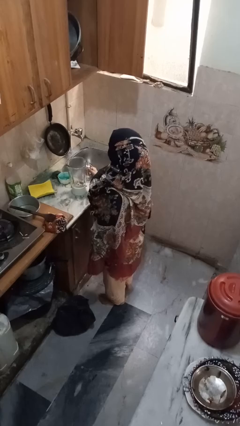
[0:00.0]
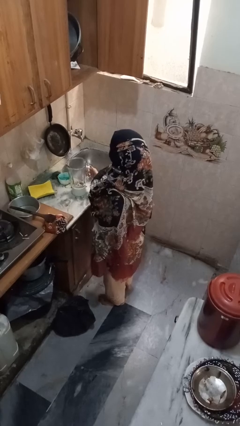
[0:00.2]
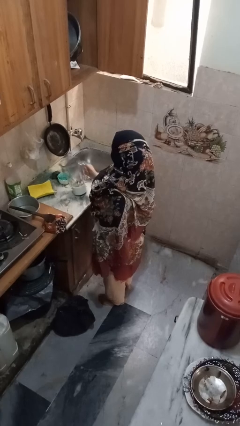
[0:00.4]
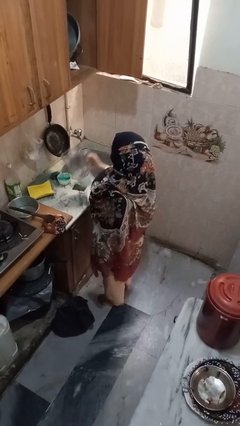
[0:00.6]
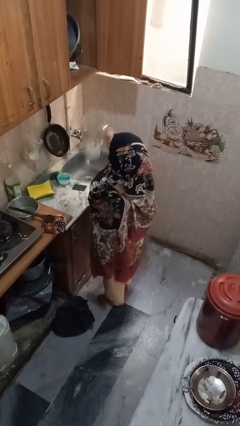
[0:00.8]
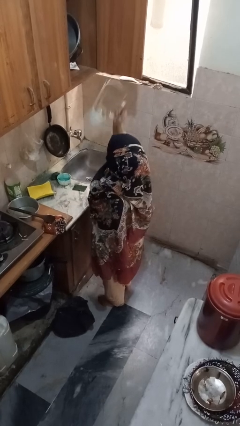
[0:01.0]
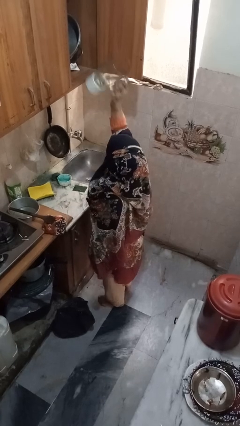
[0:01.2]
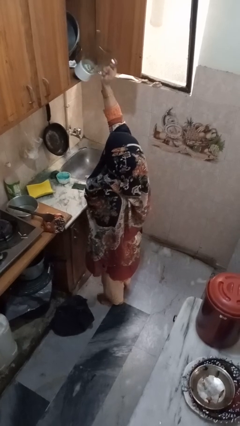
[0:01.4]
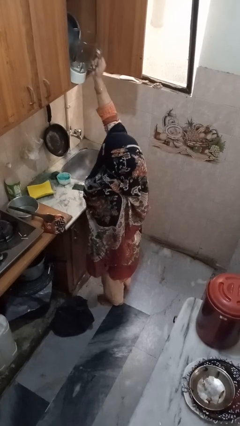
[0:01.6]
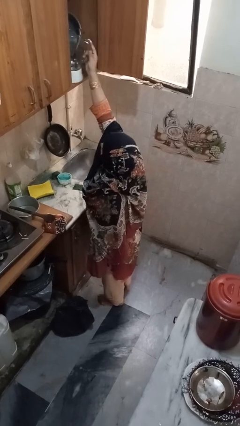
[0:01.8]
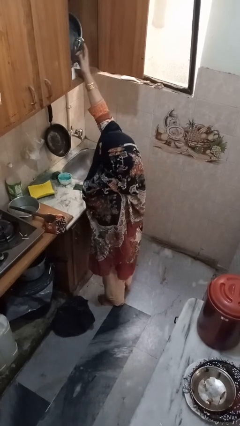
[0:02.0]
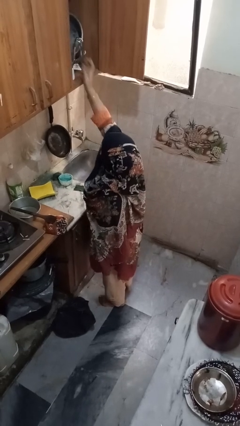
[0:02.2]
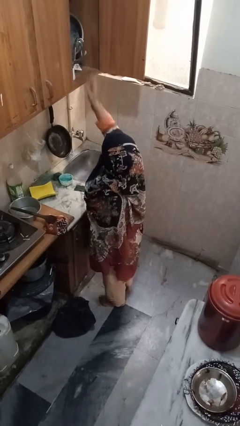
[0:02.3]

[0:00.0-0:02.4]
person takes object from cabinet

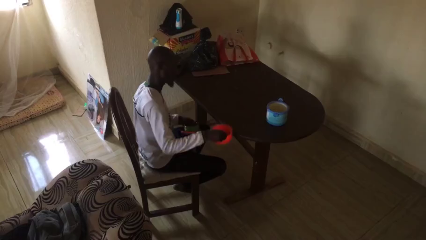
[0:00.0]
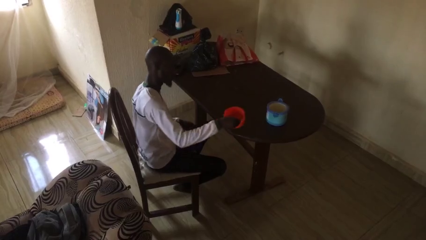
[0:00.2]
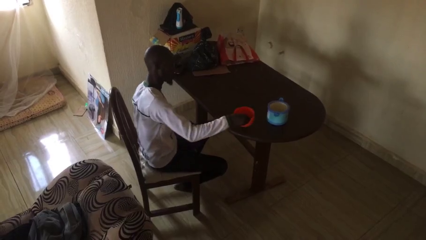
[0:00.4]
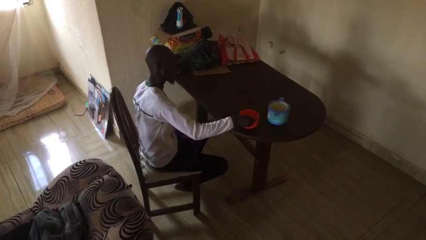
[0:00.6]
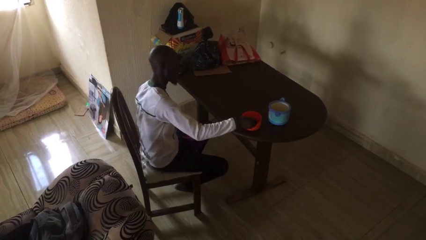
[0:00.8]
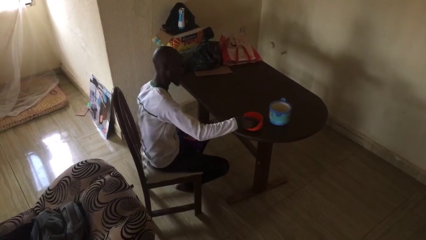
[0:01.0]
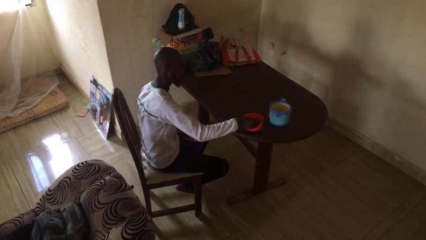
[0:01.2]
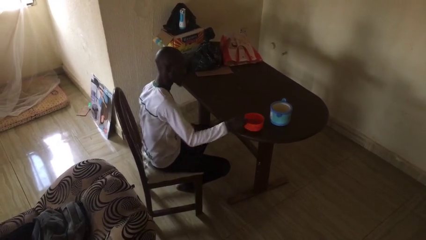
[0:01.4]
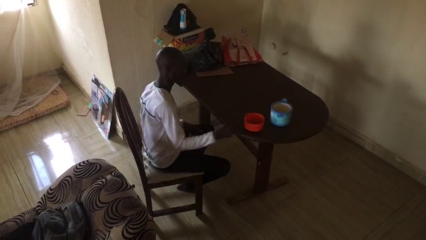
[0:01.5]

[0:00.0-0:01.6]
person sets table

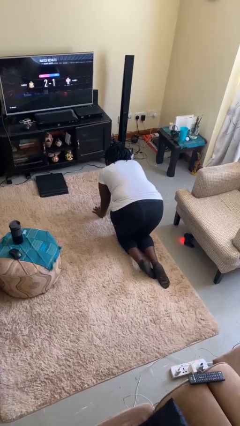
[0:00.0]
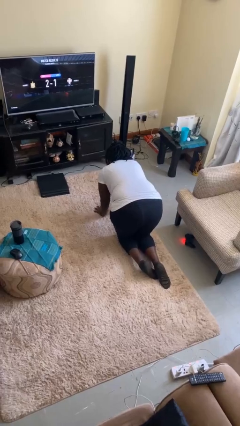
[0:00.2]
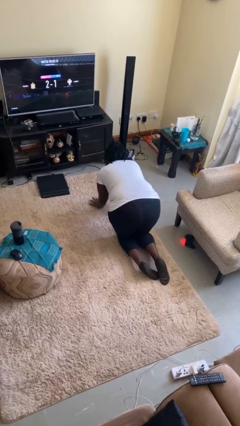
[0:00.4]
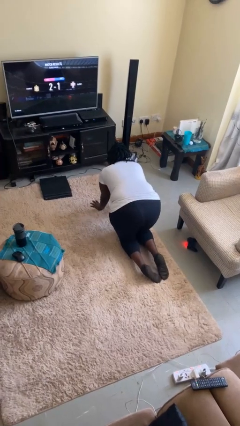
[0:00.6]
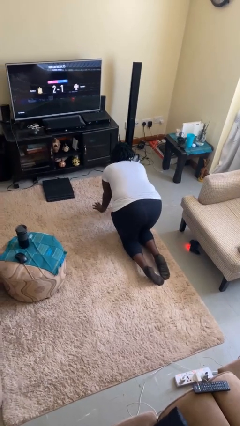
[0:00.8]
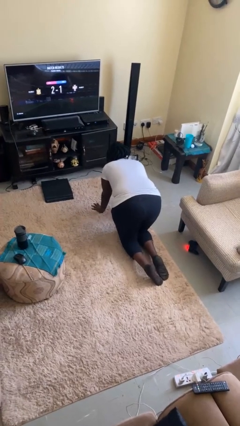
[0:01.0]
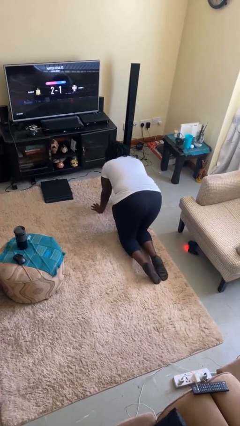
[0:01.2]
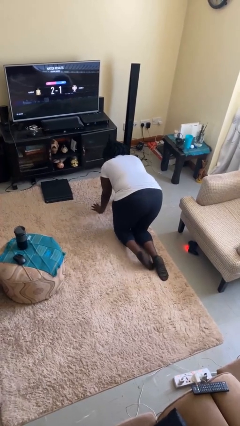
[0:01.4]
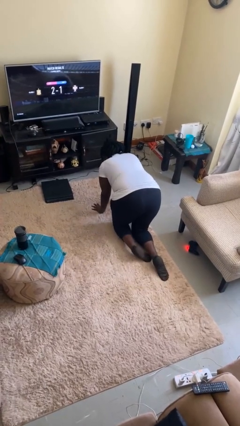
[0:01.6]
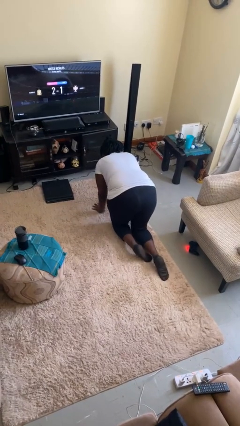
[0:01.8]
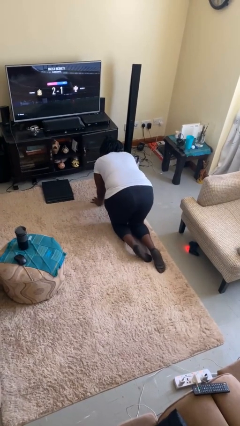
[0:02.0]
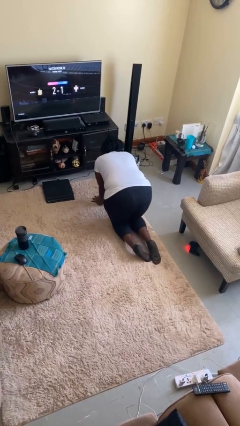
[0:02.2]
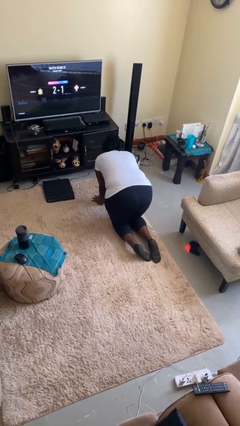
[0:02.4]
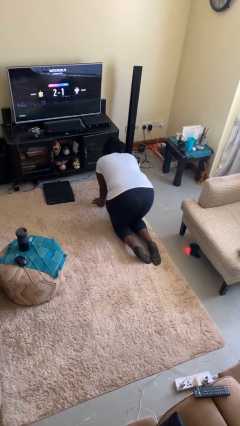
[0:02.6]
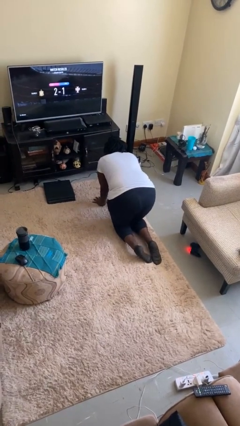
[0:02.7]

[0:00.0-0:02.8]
person crawls

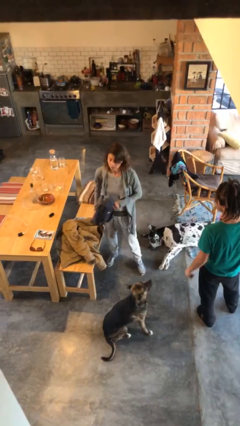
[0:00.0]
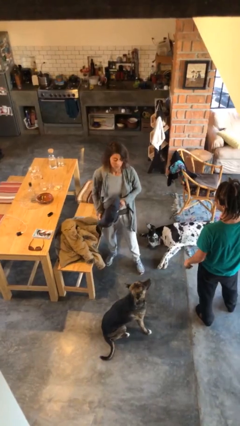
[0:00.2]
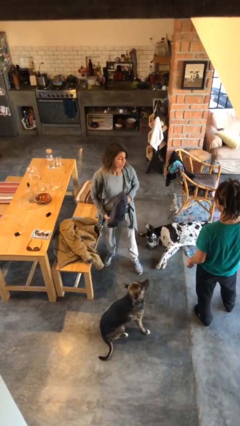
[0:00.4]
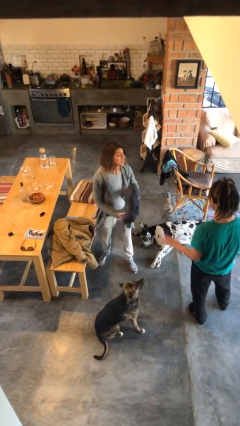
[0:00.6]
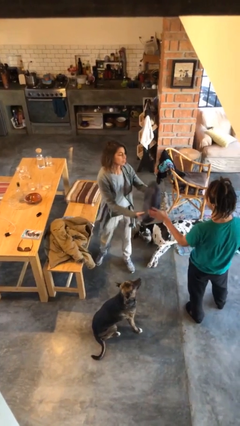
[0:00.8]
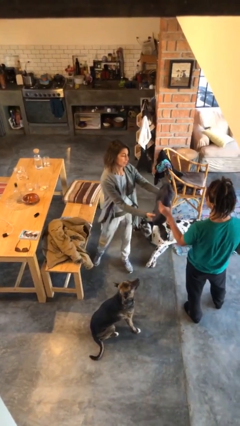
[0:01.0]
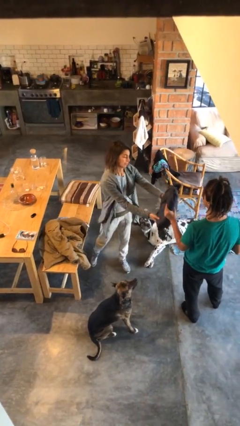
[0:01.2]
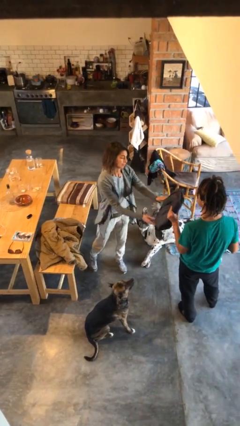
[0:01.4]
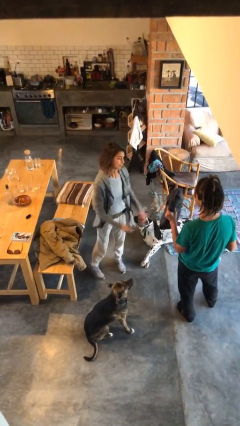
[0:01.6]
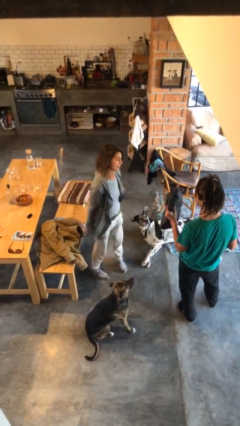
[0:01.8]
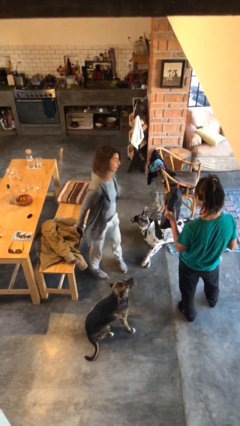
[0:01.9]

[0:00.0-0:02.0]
person transfers object to person

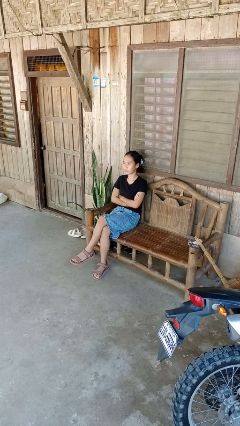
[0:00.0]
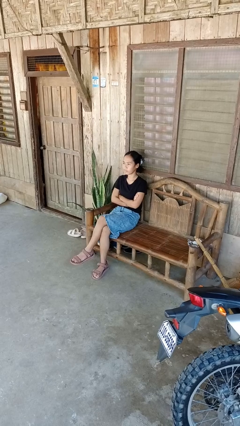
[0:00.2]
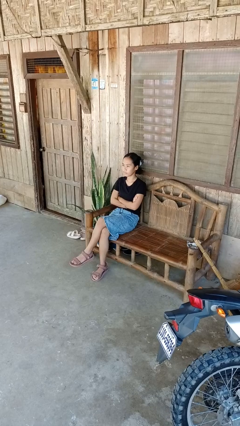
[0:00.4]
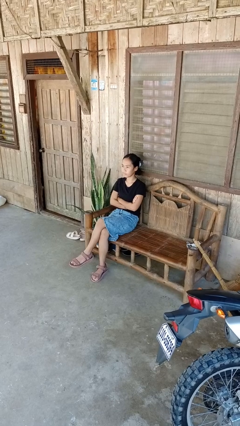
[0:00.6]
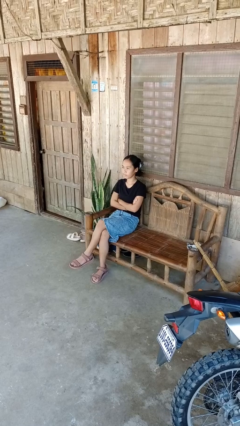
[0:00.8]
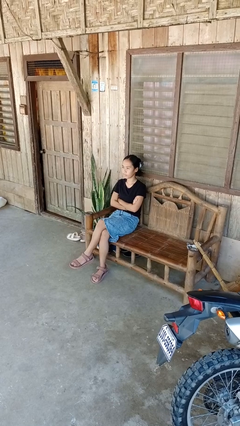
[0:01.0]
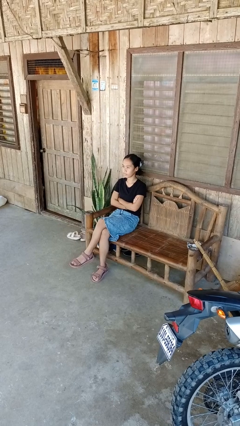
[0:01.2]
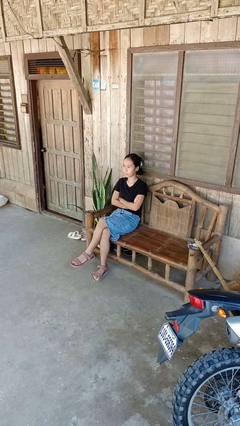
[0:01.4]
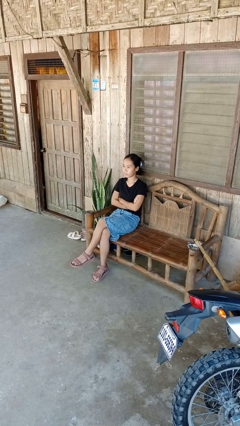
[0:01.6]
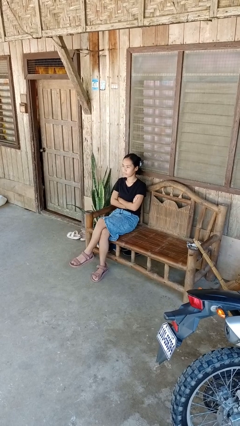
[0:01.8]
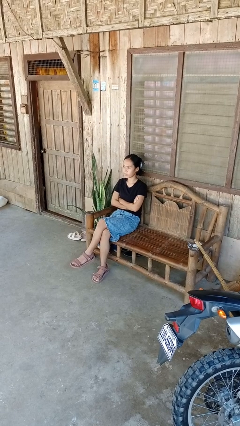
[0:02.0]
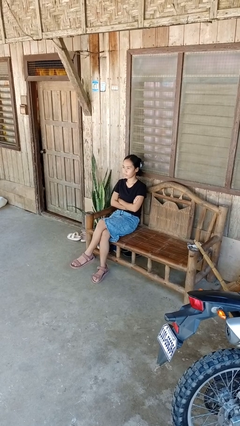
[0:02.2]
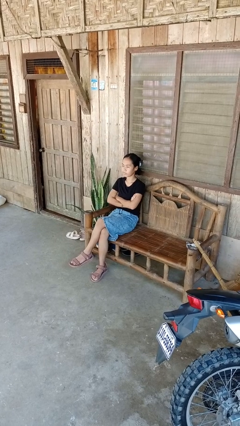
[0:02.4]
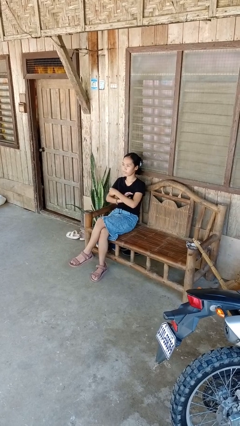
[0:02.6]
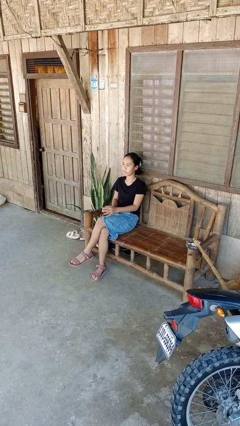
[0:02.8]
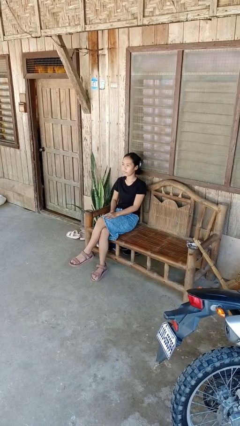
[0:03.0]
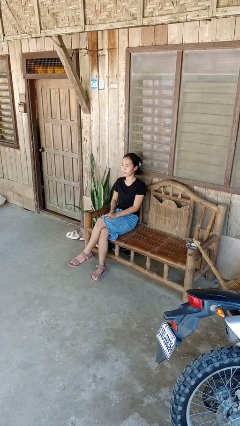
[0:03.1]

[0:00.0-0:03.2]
person crosses arms

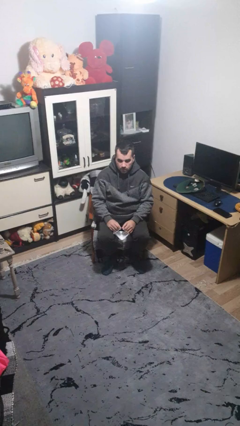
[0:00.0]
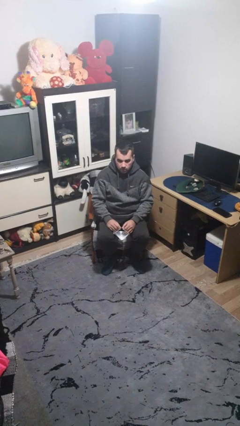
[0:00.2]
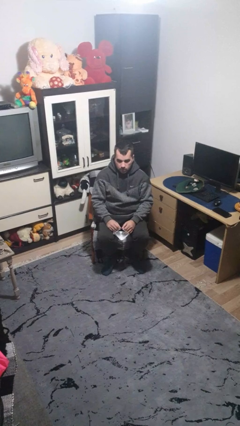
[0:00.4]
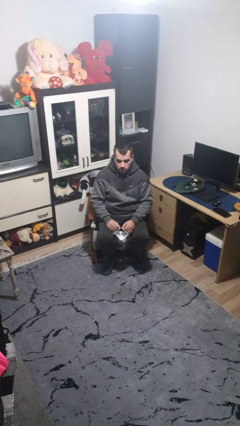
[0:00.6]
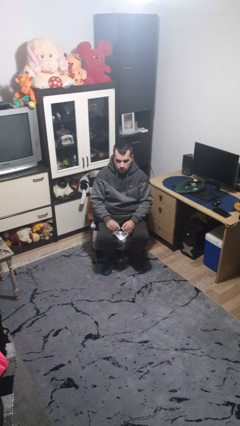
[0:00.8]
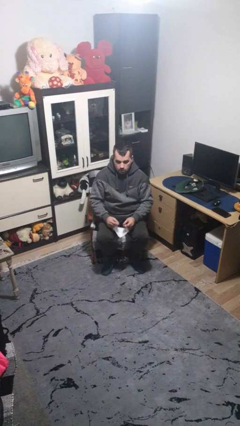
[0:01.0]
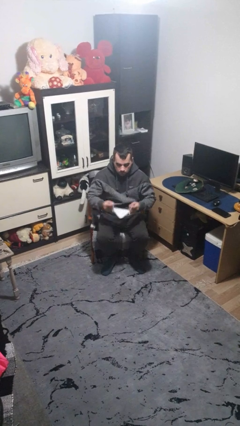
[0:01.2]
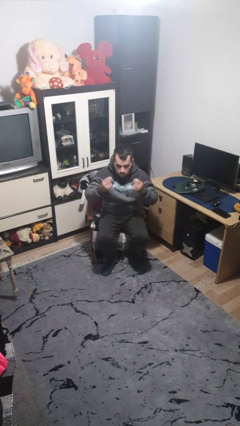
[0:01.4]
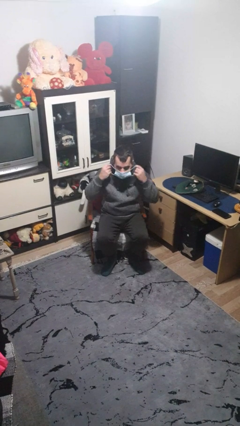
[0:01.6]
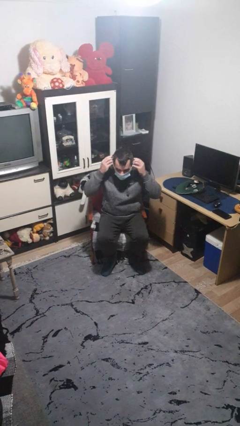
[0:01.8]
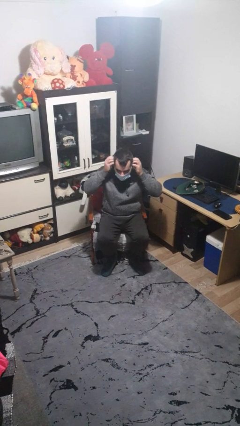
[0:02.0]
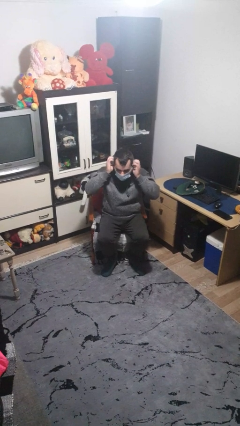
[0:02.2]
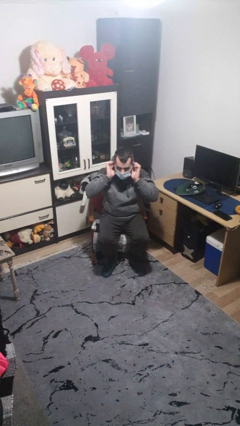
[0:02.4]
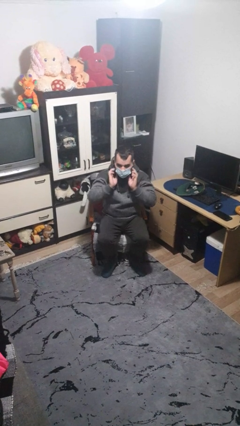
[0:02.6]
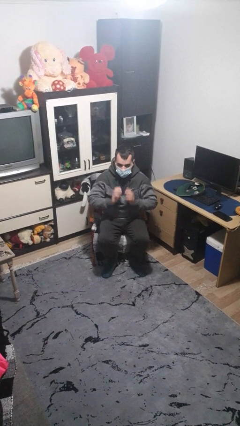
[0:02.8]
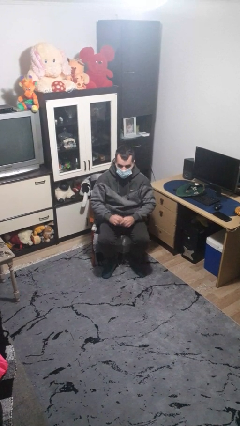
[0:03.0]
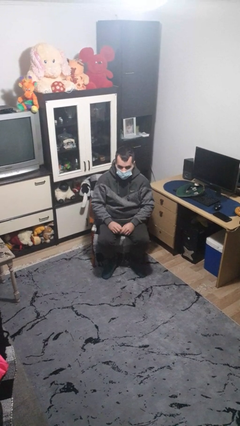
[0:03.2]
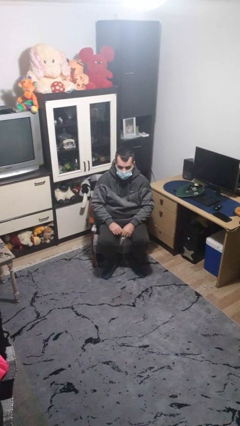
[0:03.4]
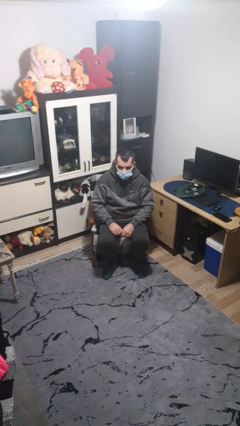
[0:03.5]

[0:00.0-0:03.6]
person puts on facemask

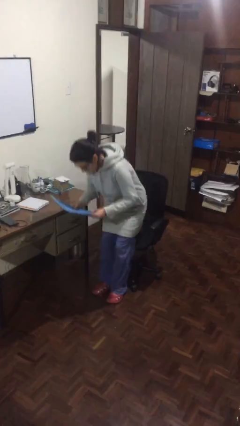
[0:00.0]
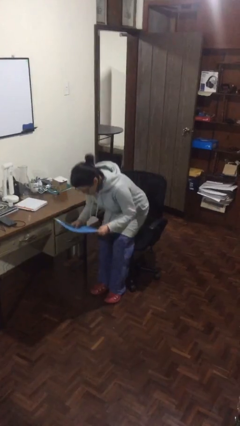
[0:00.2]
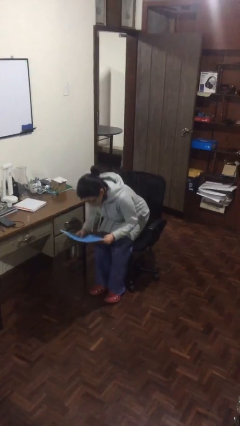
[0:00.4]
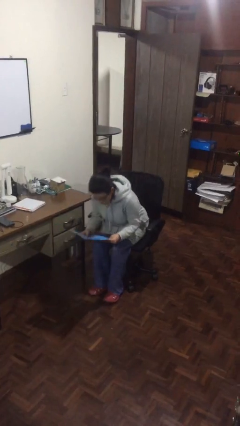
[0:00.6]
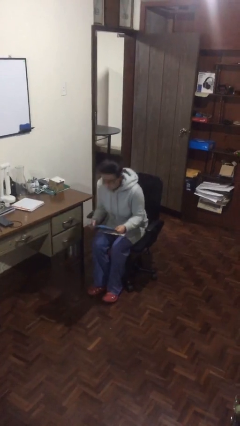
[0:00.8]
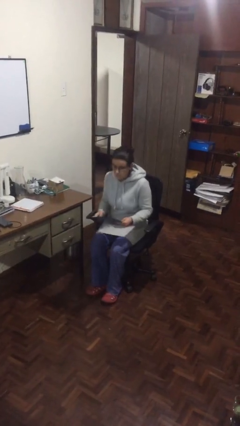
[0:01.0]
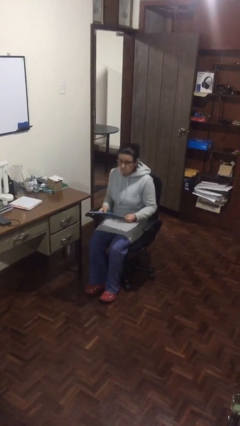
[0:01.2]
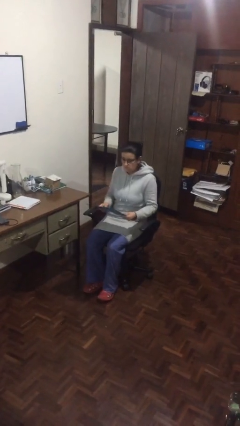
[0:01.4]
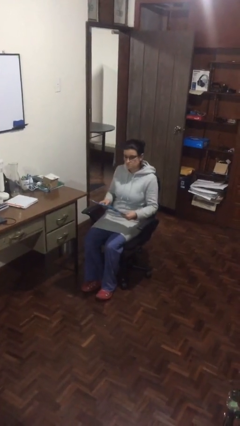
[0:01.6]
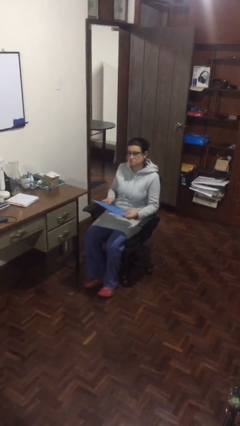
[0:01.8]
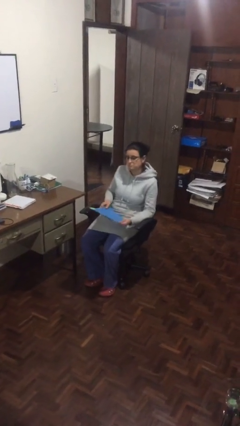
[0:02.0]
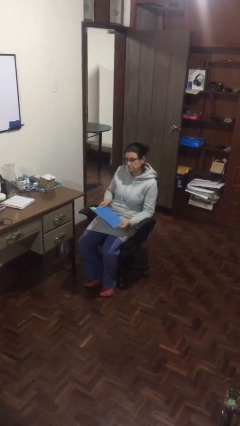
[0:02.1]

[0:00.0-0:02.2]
person sits down
